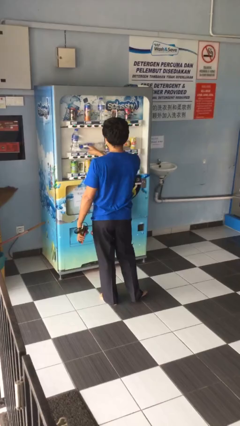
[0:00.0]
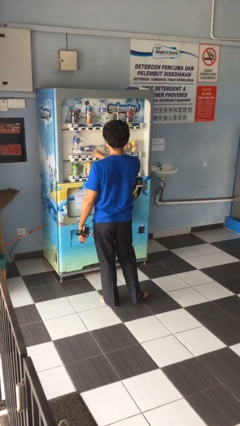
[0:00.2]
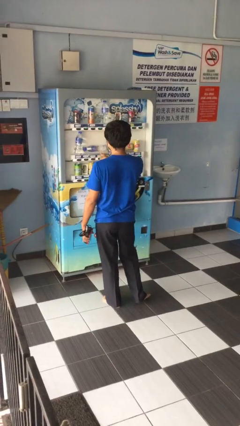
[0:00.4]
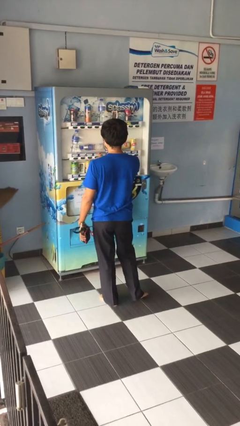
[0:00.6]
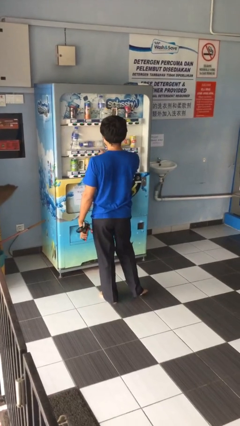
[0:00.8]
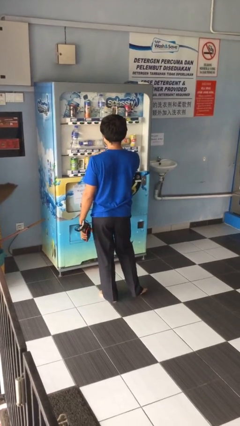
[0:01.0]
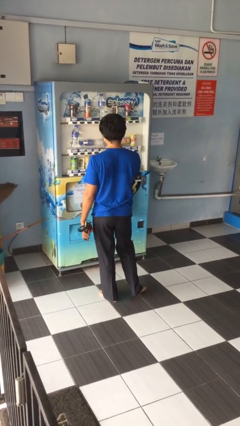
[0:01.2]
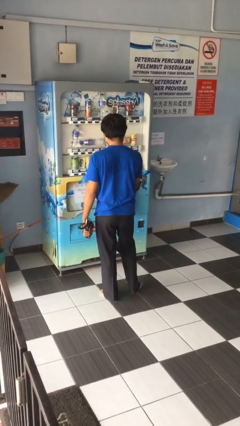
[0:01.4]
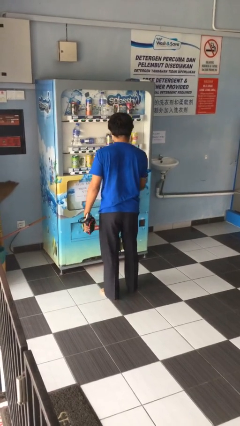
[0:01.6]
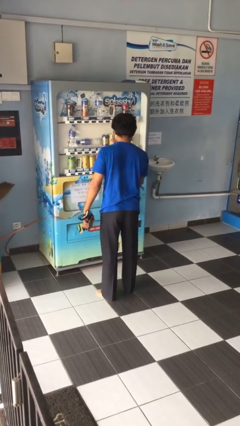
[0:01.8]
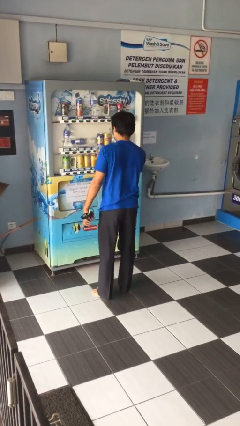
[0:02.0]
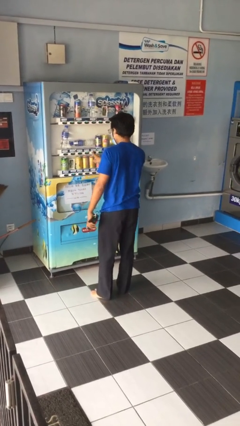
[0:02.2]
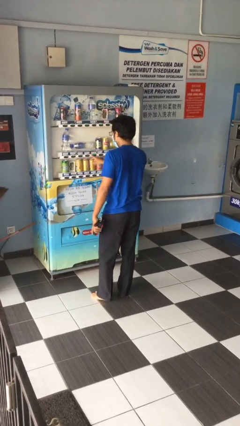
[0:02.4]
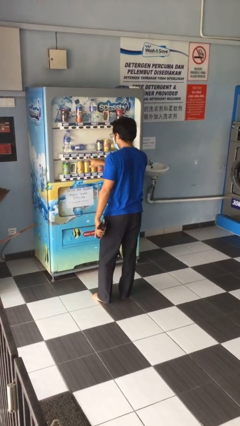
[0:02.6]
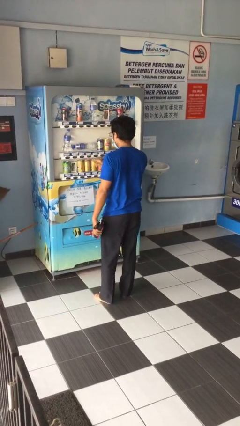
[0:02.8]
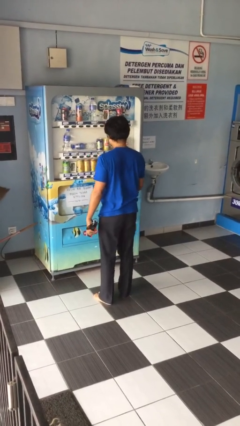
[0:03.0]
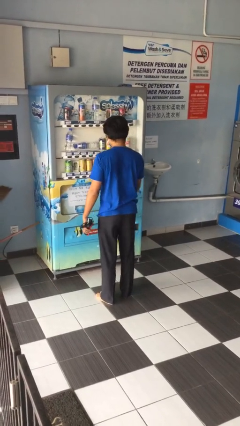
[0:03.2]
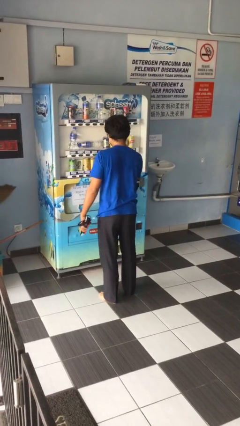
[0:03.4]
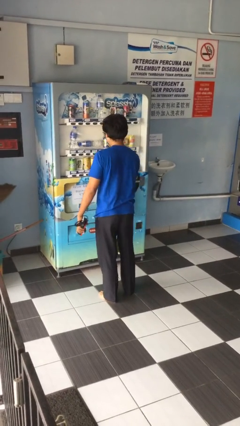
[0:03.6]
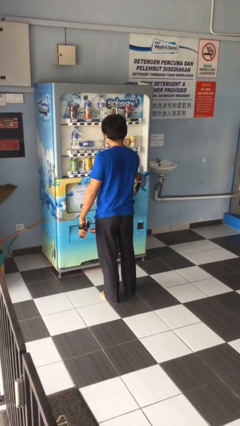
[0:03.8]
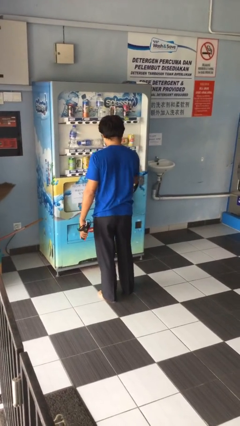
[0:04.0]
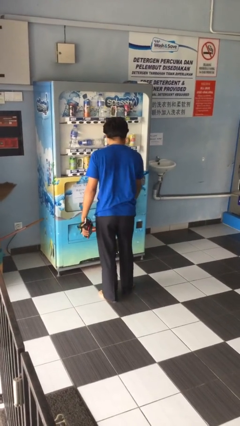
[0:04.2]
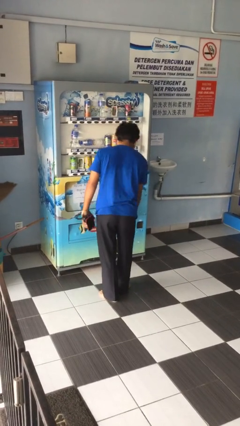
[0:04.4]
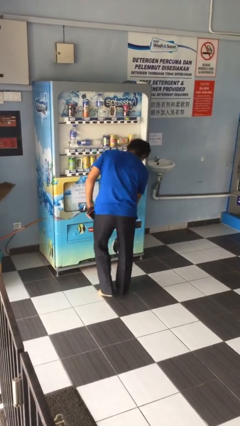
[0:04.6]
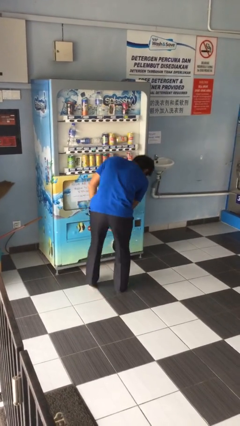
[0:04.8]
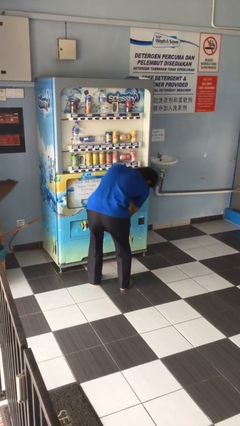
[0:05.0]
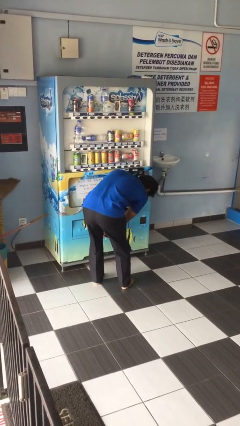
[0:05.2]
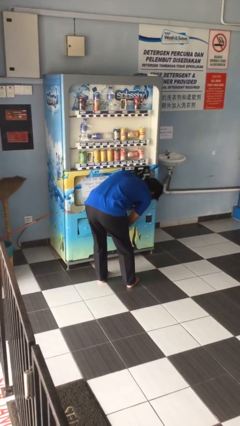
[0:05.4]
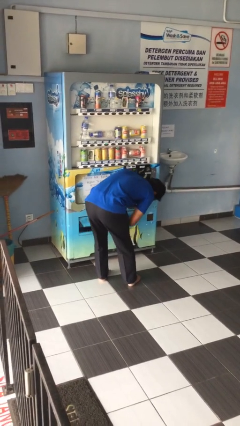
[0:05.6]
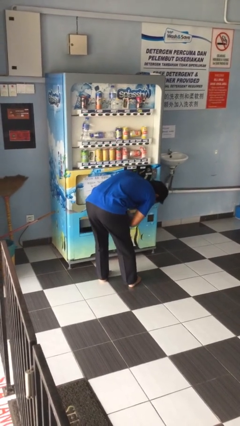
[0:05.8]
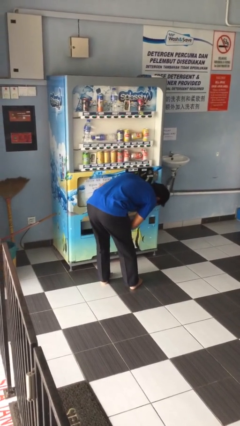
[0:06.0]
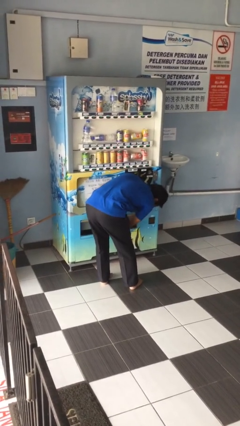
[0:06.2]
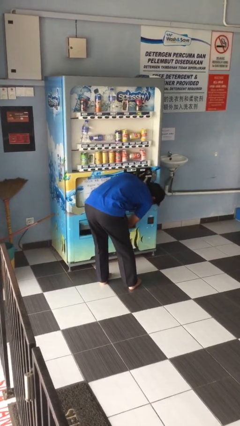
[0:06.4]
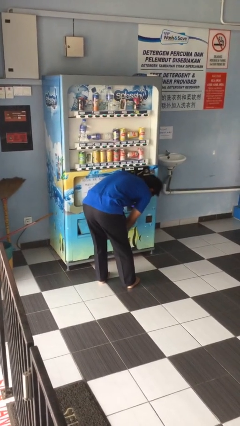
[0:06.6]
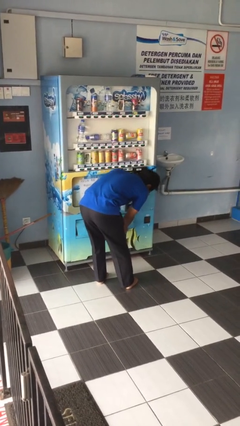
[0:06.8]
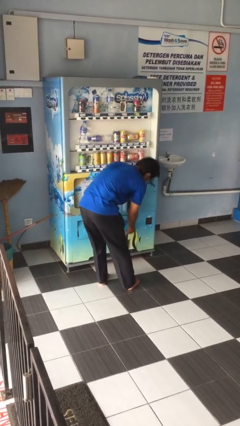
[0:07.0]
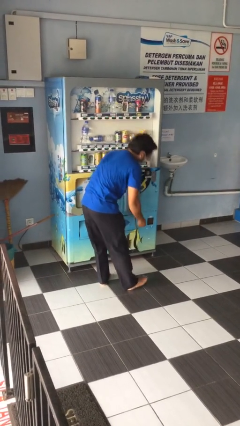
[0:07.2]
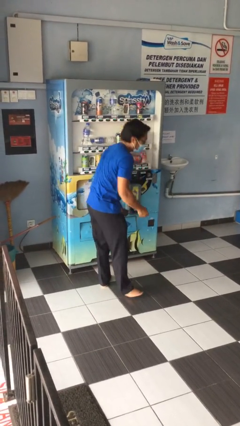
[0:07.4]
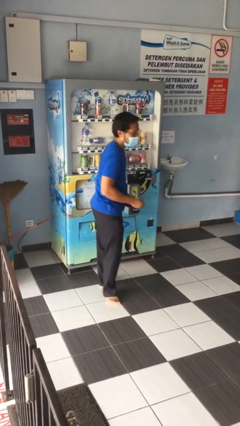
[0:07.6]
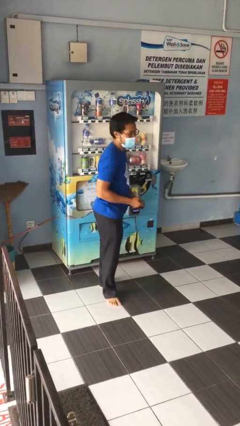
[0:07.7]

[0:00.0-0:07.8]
person purchases from machine

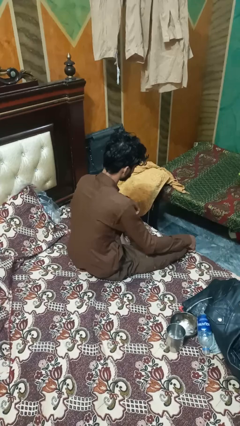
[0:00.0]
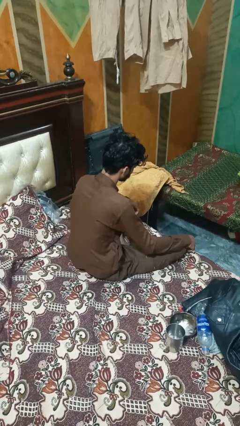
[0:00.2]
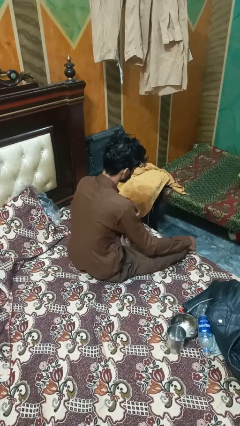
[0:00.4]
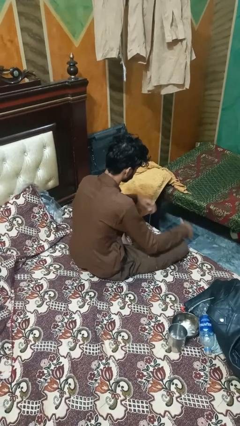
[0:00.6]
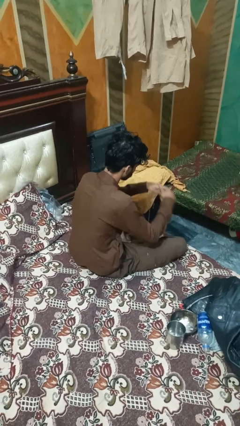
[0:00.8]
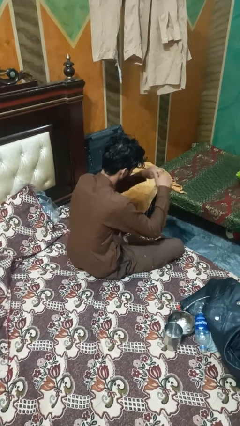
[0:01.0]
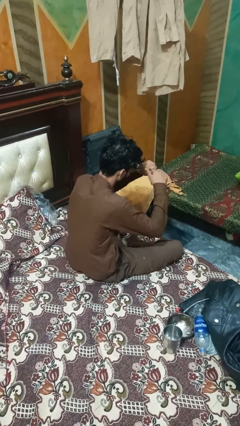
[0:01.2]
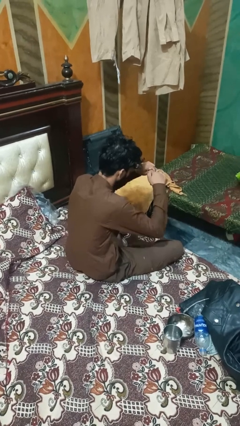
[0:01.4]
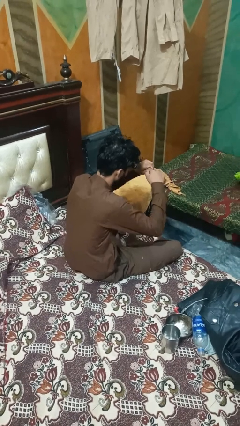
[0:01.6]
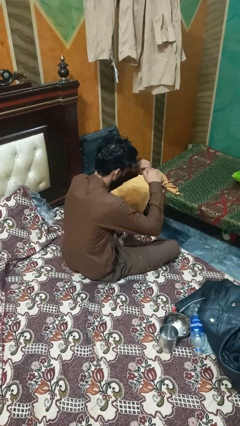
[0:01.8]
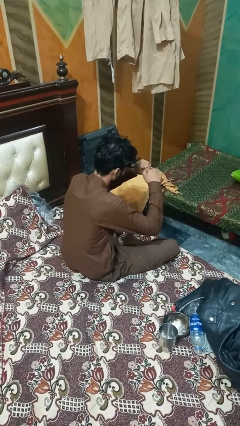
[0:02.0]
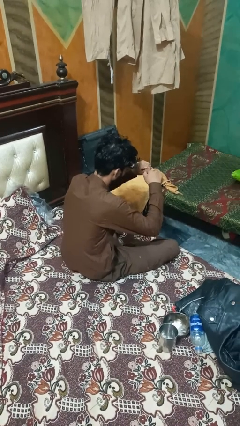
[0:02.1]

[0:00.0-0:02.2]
person snaps fingers

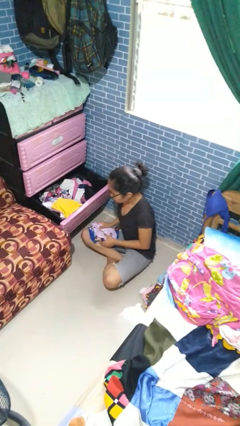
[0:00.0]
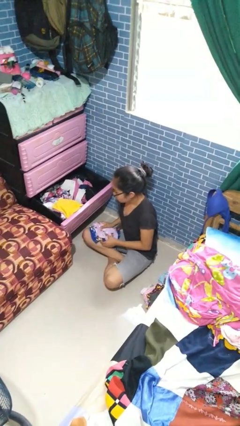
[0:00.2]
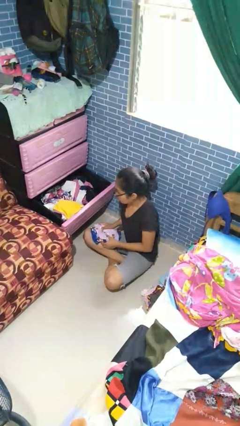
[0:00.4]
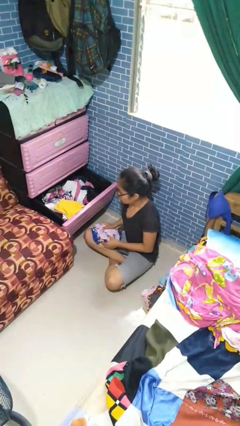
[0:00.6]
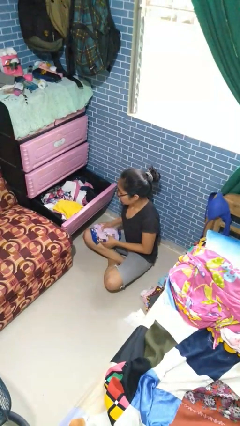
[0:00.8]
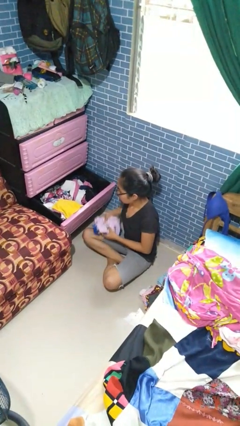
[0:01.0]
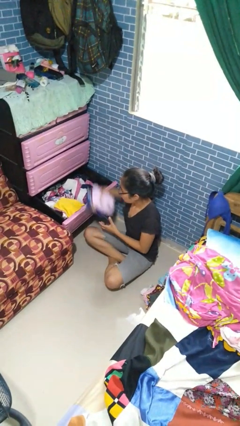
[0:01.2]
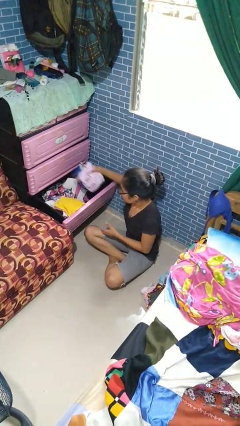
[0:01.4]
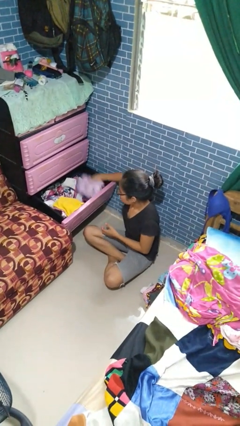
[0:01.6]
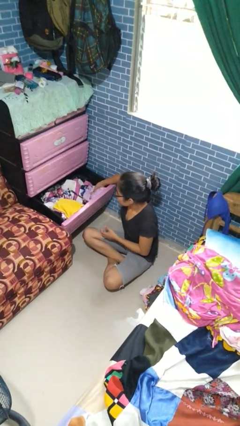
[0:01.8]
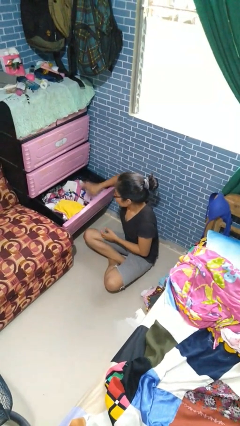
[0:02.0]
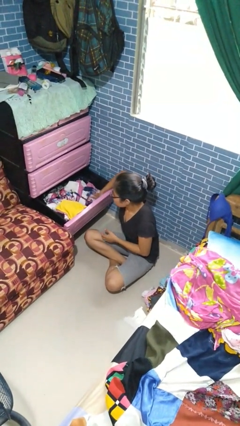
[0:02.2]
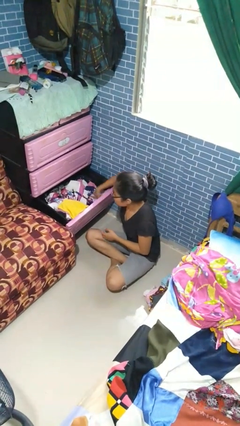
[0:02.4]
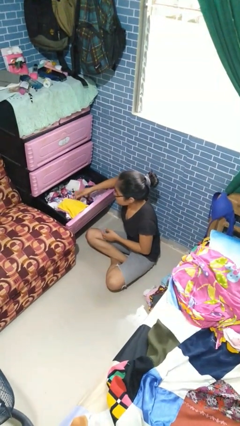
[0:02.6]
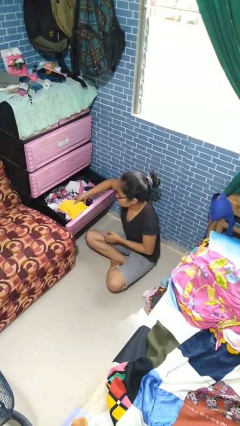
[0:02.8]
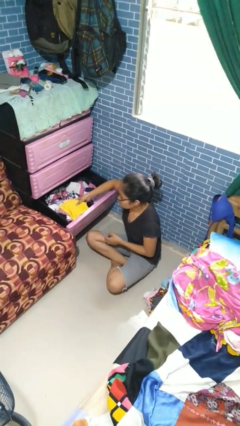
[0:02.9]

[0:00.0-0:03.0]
person puts clothes into dresser

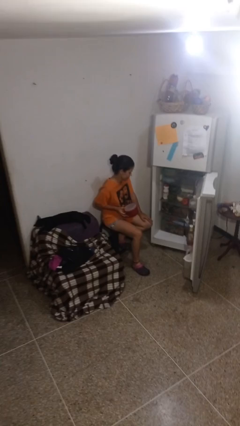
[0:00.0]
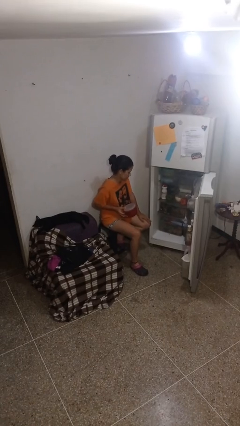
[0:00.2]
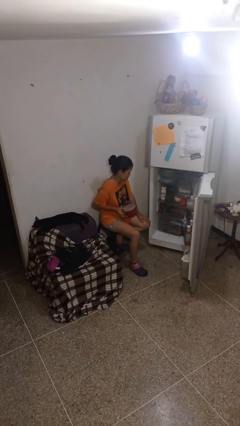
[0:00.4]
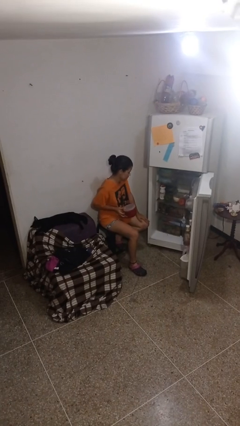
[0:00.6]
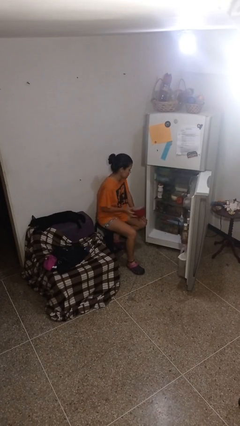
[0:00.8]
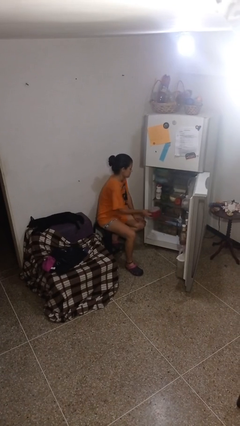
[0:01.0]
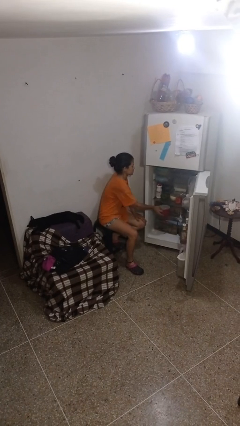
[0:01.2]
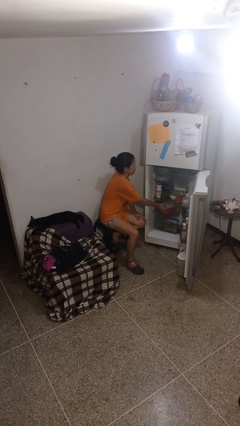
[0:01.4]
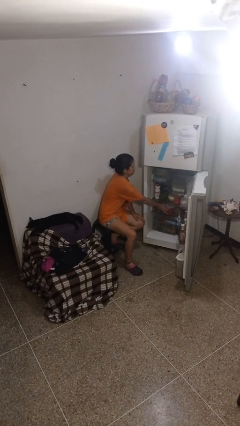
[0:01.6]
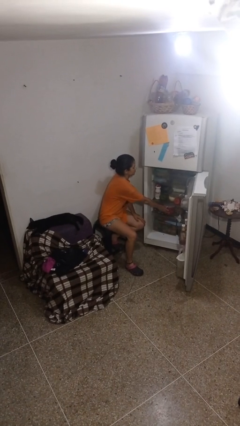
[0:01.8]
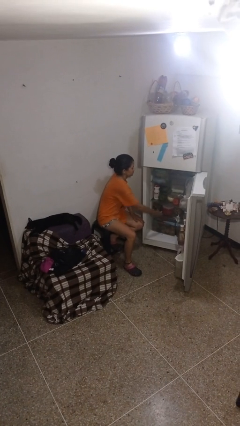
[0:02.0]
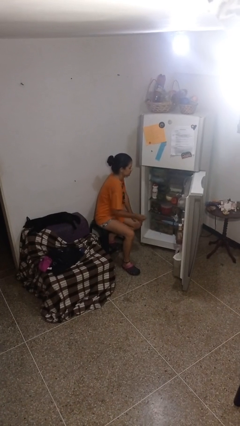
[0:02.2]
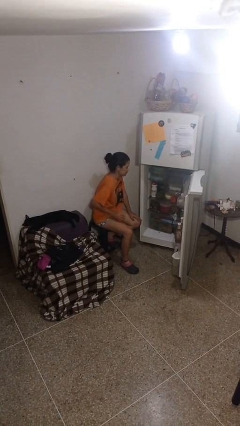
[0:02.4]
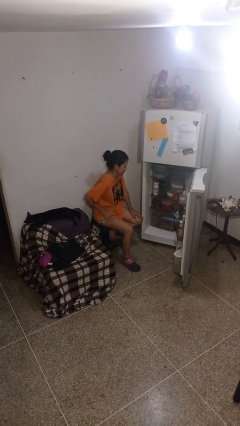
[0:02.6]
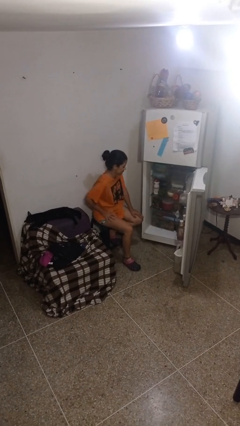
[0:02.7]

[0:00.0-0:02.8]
person puts object into refrigerator

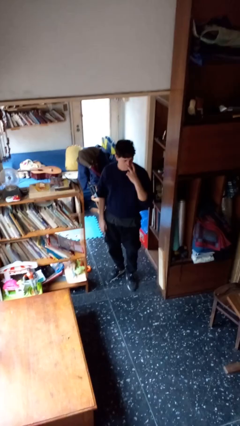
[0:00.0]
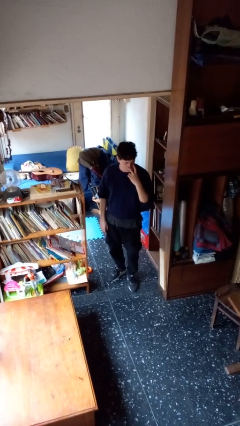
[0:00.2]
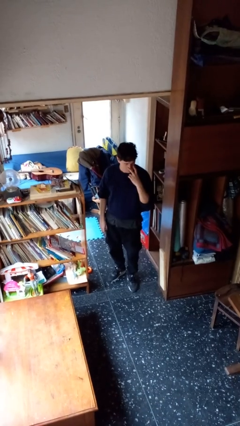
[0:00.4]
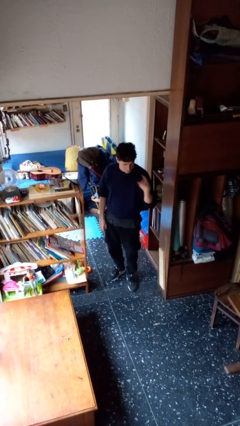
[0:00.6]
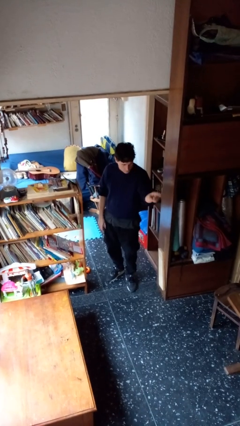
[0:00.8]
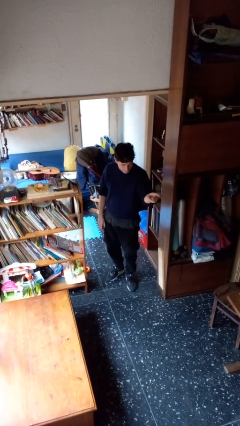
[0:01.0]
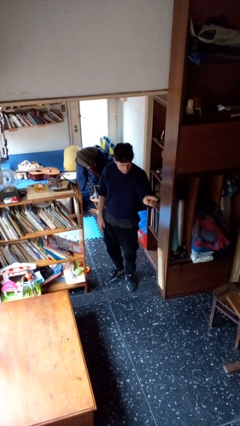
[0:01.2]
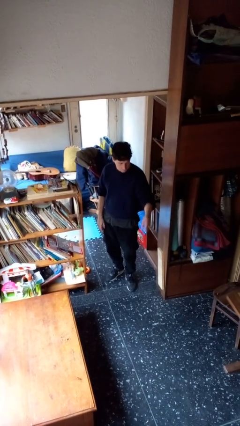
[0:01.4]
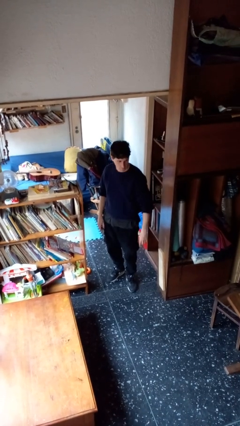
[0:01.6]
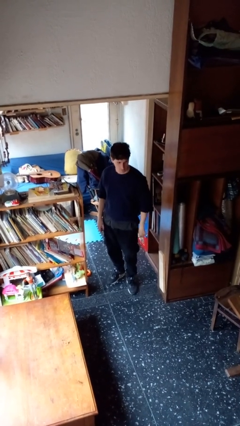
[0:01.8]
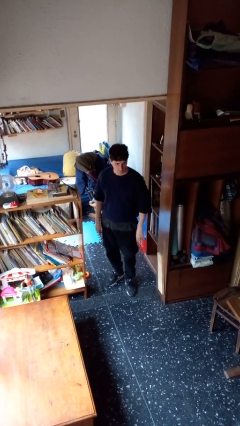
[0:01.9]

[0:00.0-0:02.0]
person gestures watch closely
